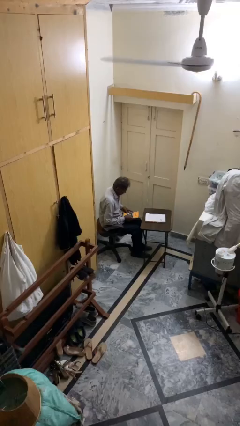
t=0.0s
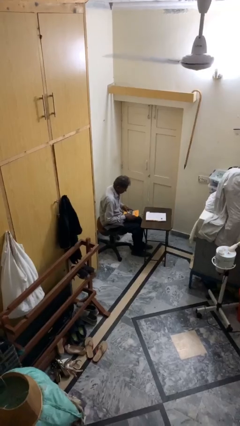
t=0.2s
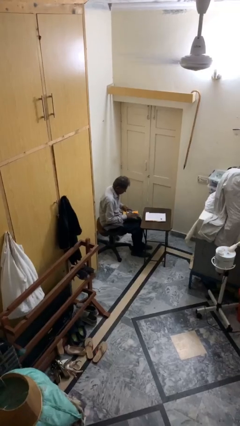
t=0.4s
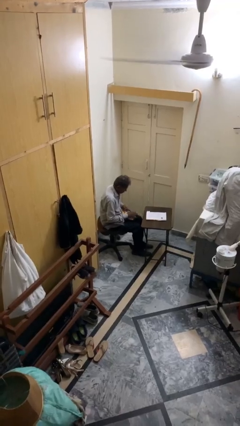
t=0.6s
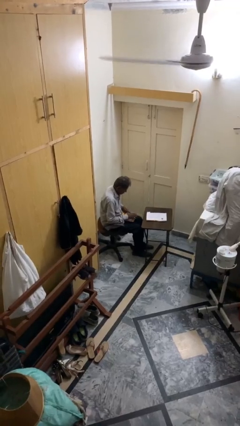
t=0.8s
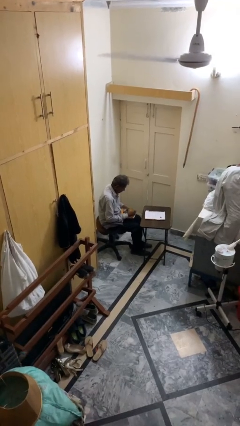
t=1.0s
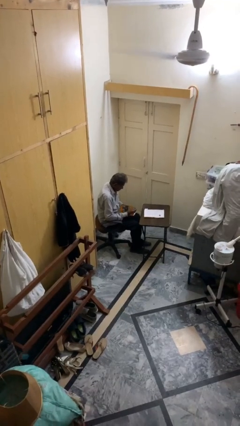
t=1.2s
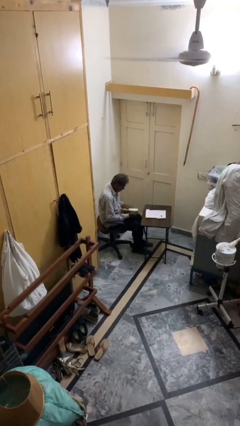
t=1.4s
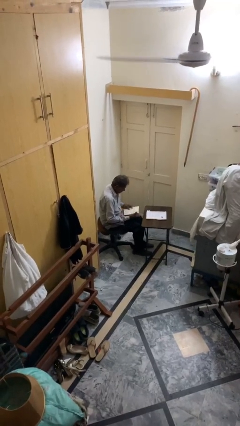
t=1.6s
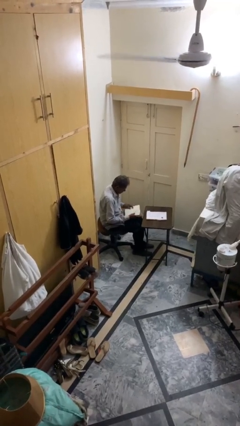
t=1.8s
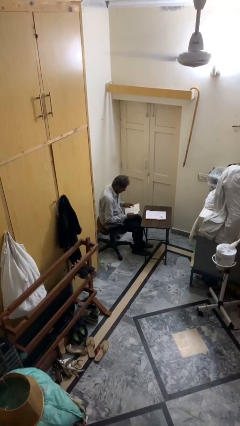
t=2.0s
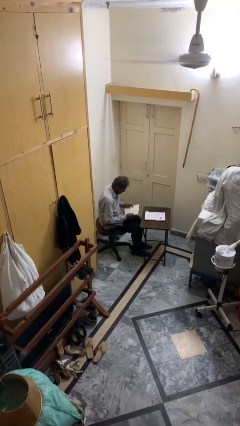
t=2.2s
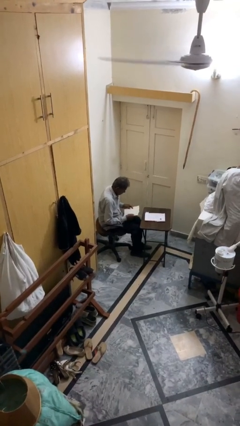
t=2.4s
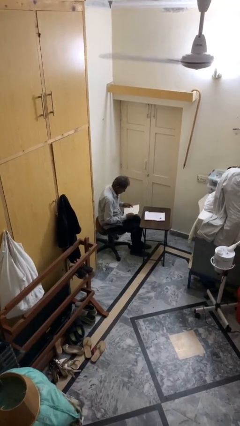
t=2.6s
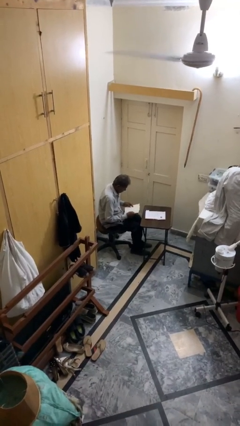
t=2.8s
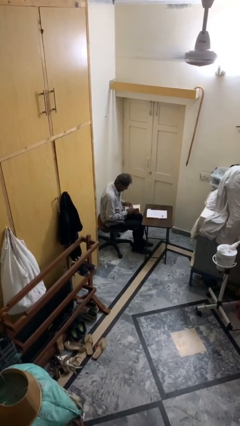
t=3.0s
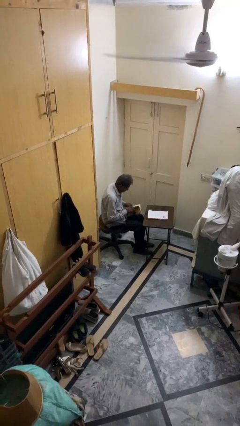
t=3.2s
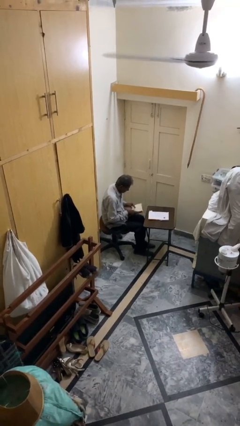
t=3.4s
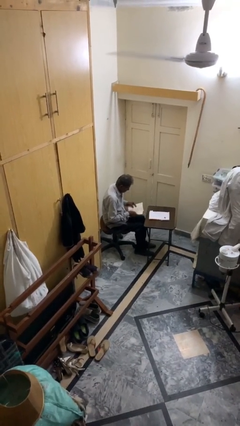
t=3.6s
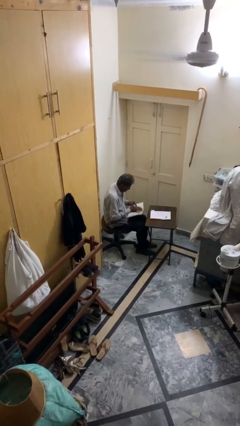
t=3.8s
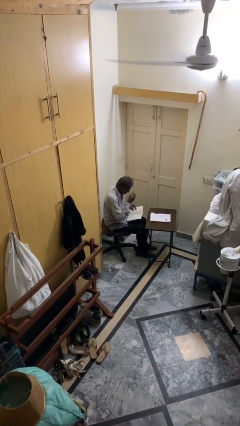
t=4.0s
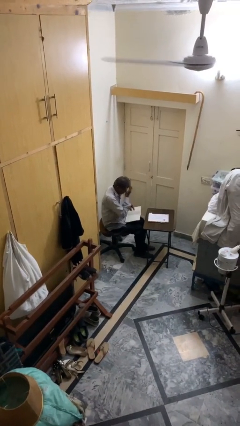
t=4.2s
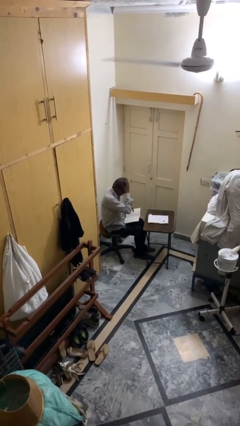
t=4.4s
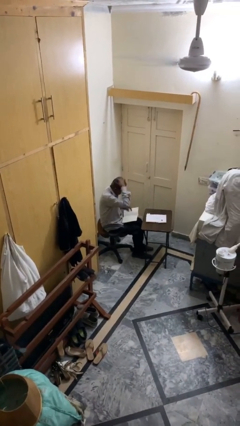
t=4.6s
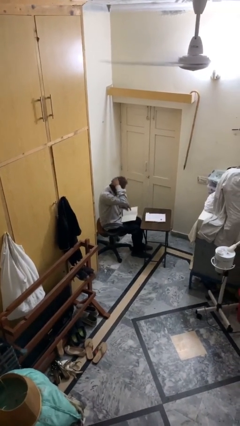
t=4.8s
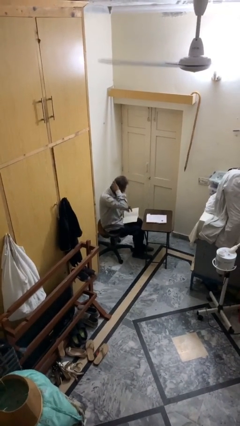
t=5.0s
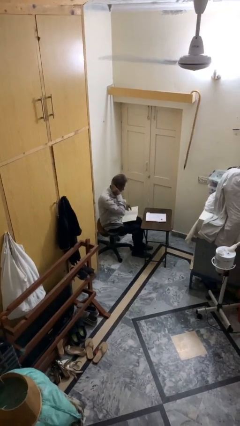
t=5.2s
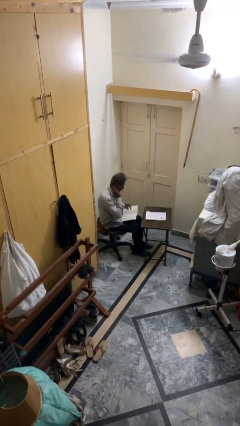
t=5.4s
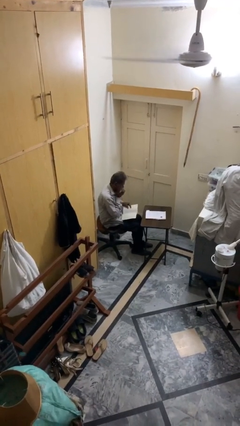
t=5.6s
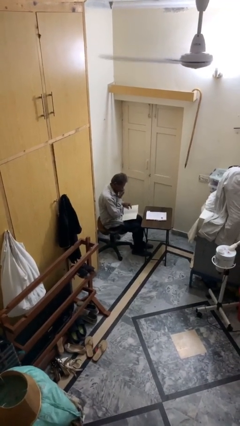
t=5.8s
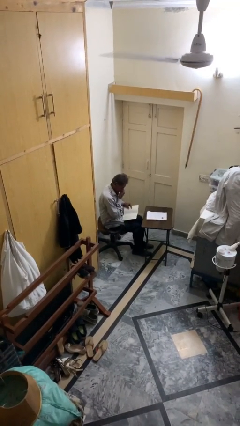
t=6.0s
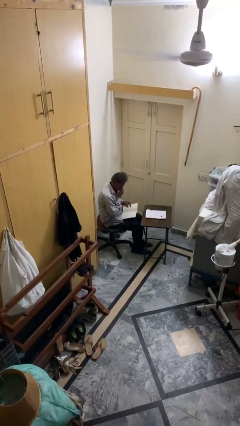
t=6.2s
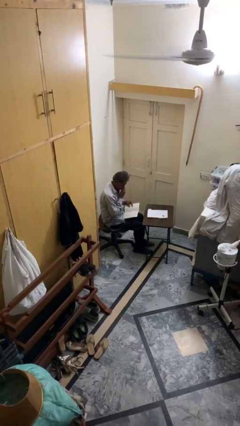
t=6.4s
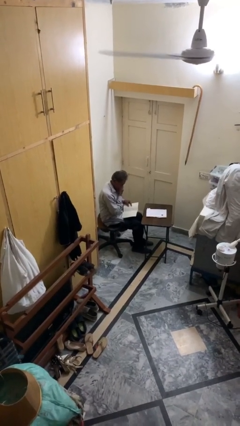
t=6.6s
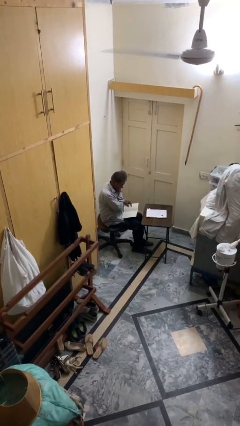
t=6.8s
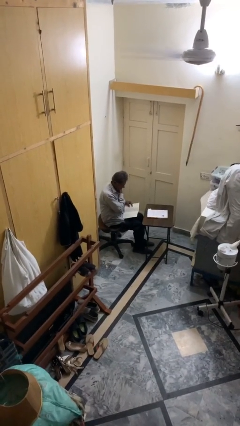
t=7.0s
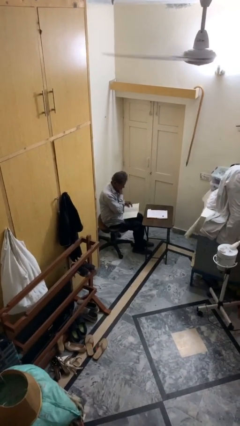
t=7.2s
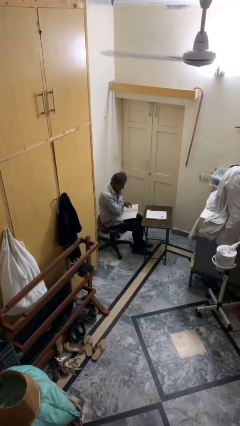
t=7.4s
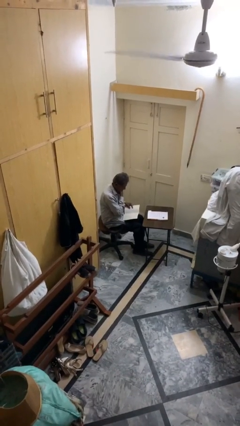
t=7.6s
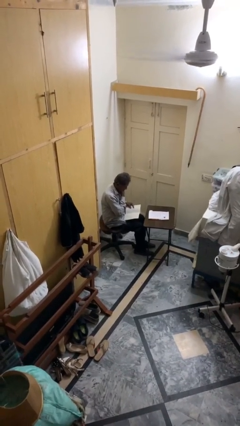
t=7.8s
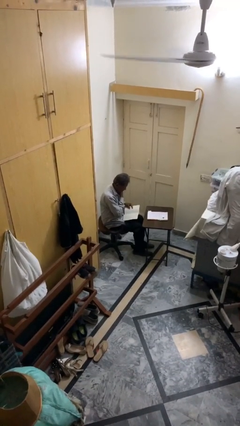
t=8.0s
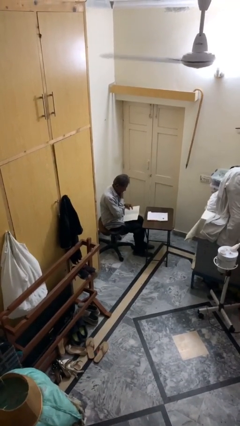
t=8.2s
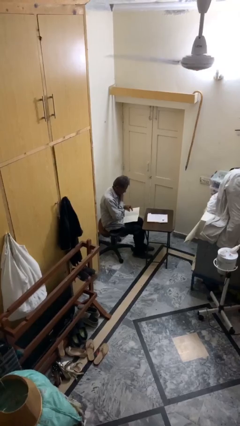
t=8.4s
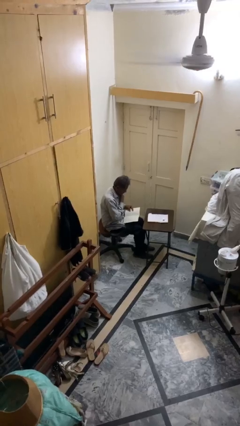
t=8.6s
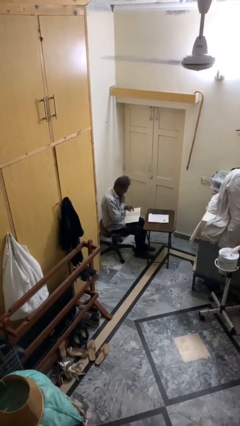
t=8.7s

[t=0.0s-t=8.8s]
person reads document

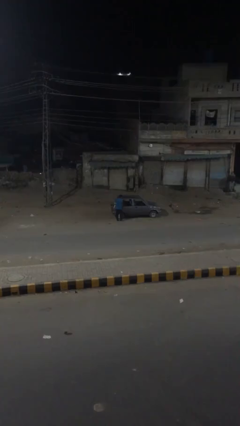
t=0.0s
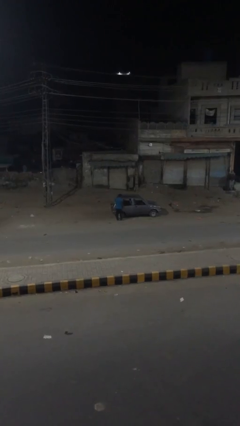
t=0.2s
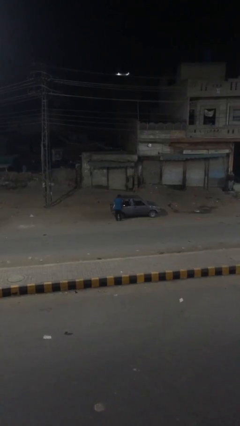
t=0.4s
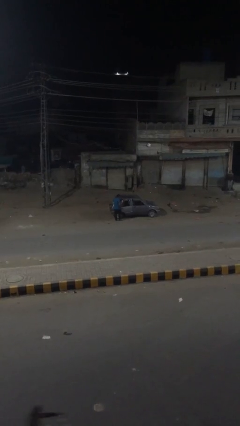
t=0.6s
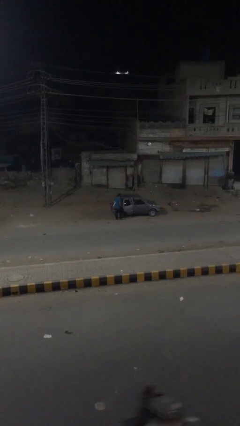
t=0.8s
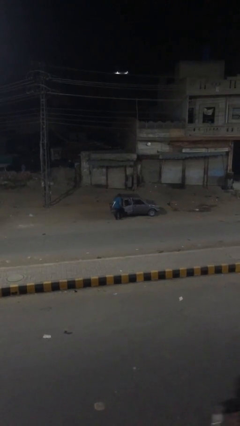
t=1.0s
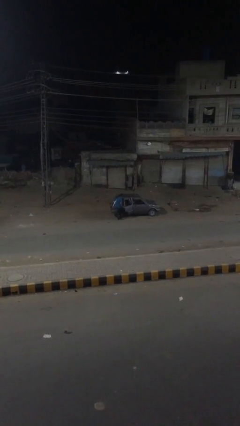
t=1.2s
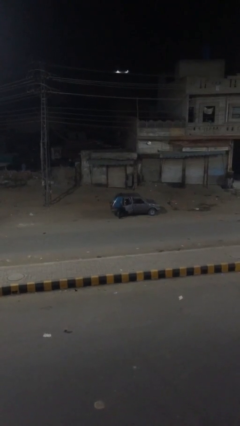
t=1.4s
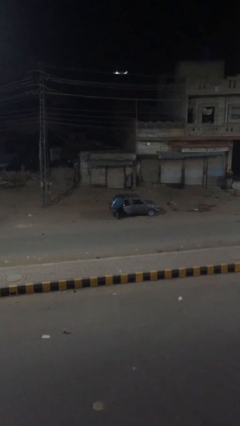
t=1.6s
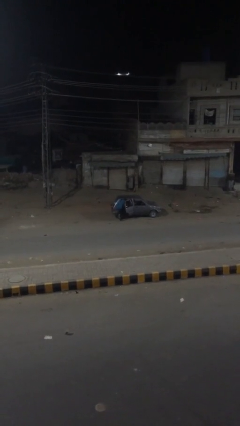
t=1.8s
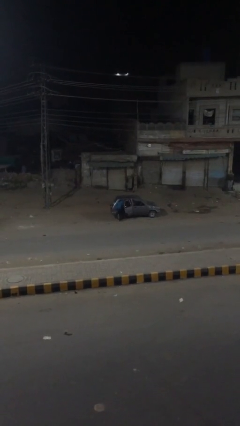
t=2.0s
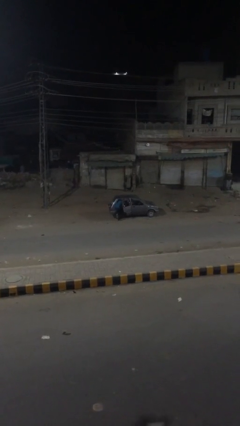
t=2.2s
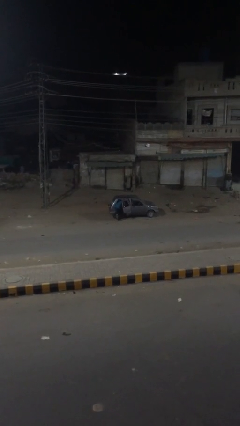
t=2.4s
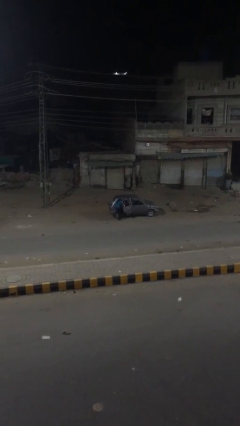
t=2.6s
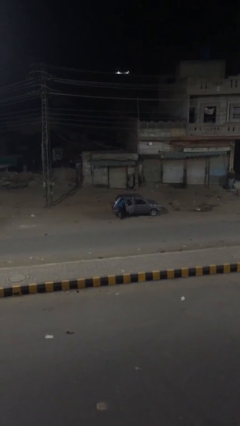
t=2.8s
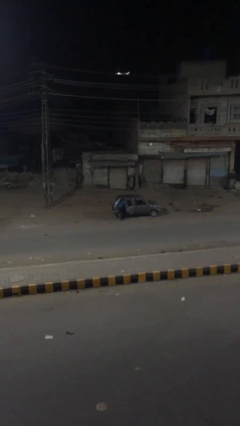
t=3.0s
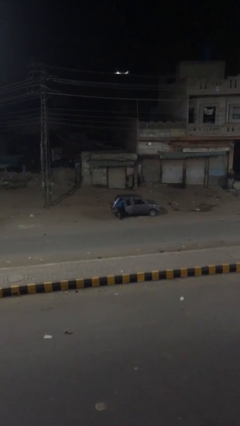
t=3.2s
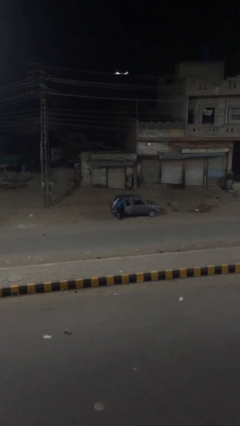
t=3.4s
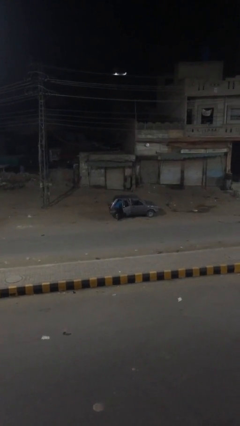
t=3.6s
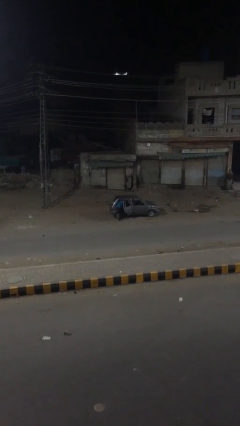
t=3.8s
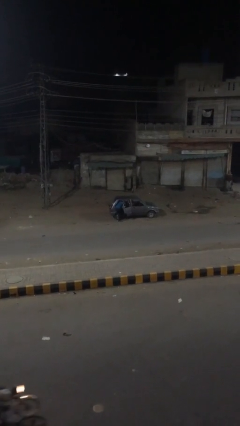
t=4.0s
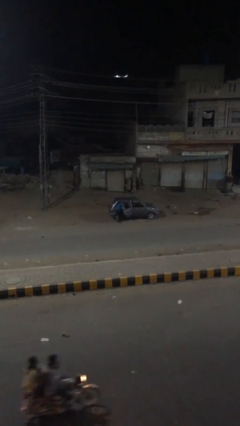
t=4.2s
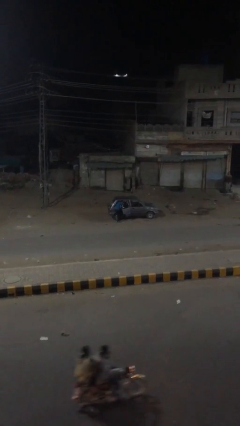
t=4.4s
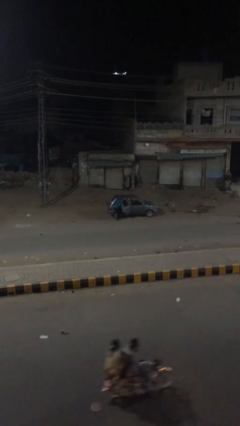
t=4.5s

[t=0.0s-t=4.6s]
person opens car door

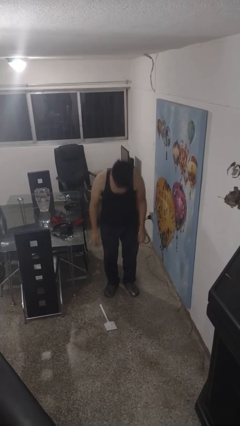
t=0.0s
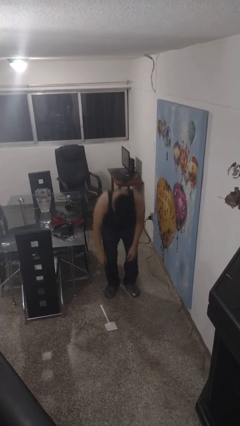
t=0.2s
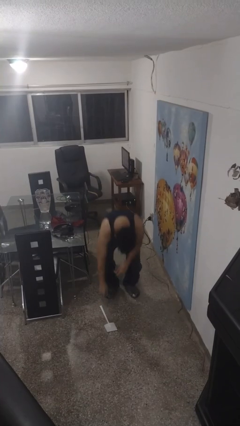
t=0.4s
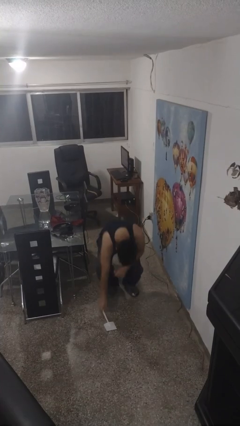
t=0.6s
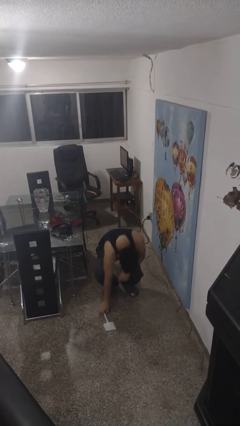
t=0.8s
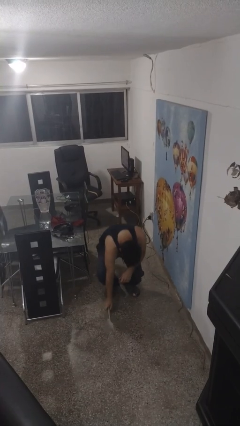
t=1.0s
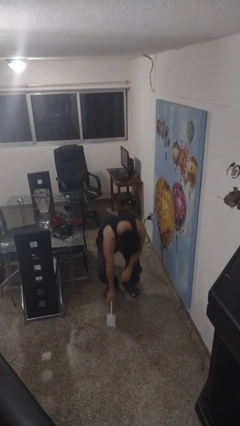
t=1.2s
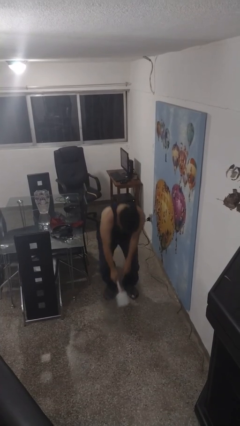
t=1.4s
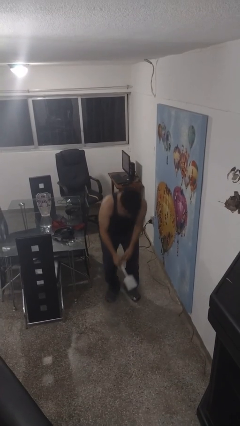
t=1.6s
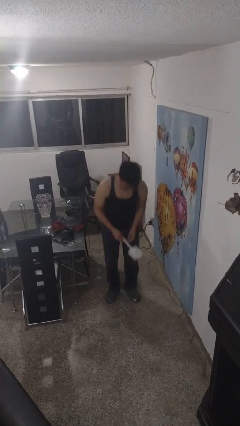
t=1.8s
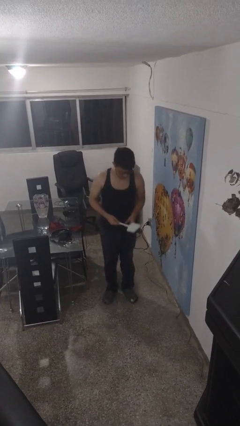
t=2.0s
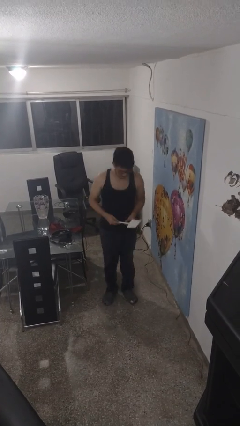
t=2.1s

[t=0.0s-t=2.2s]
person picks up object from floor

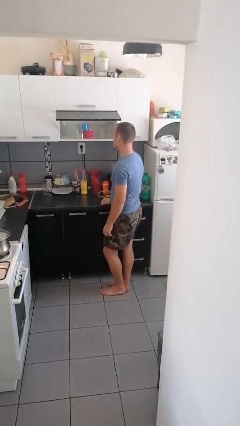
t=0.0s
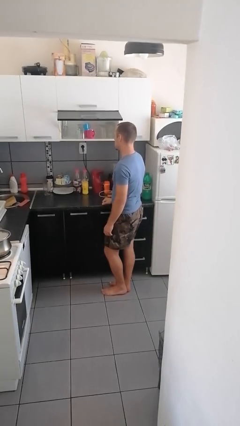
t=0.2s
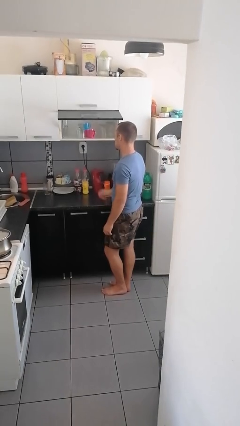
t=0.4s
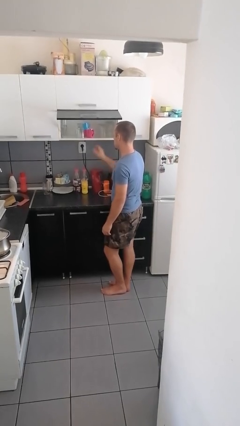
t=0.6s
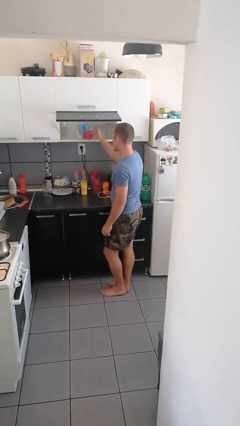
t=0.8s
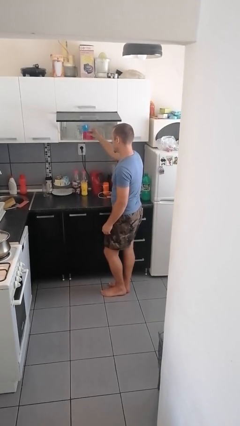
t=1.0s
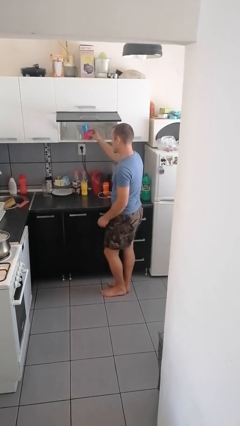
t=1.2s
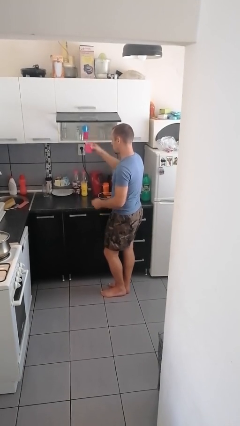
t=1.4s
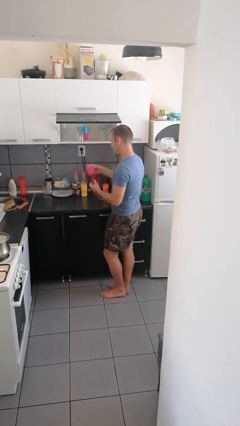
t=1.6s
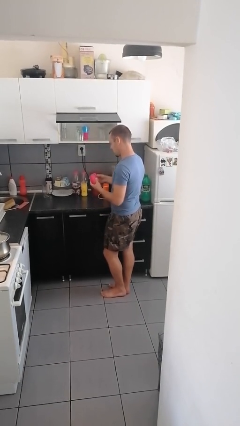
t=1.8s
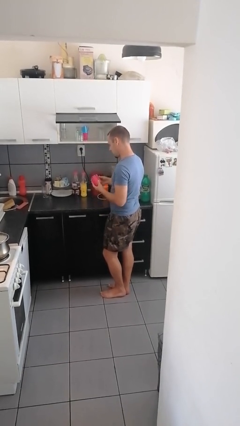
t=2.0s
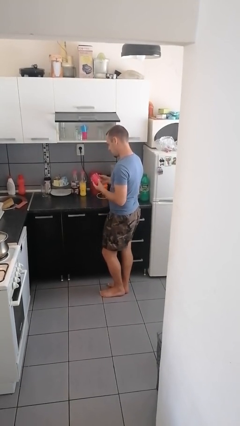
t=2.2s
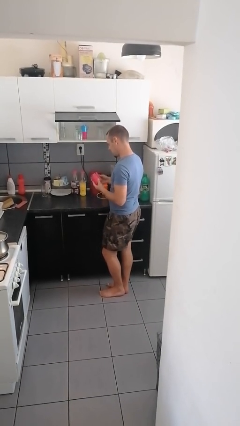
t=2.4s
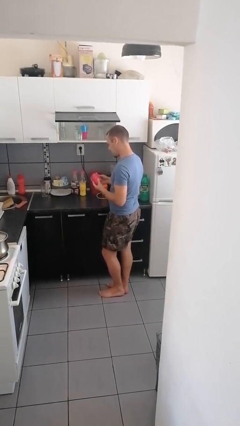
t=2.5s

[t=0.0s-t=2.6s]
person picks up object from cabinet
